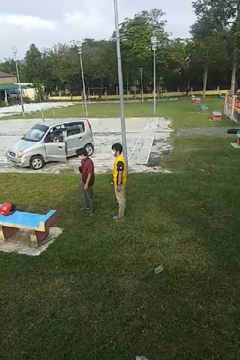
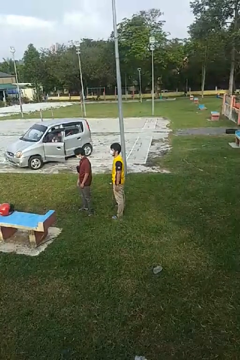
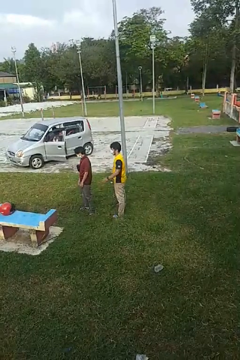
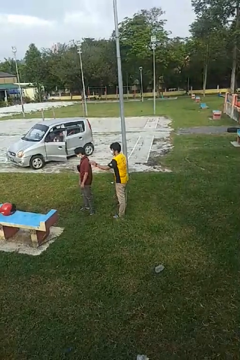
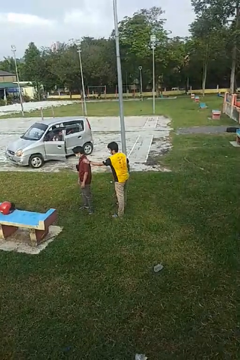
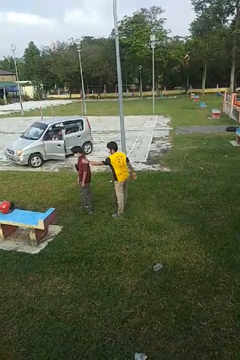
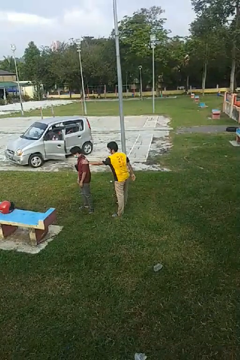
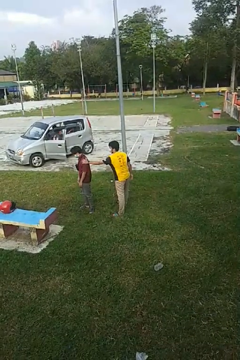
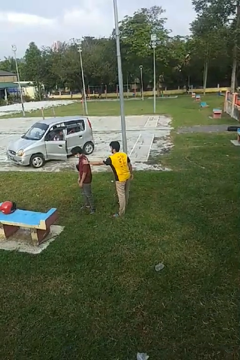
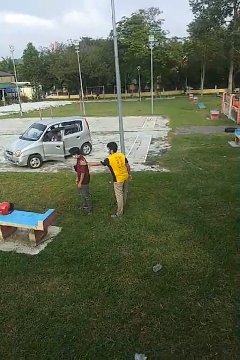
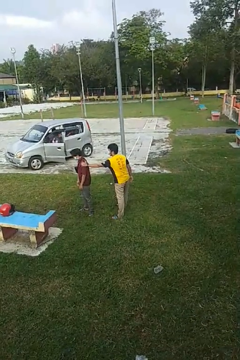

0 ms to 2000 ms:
person grabs person by shoulder

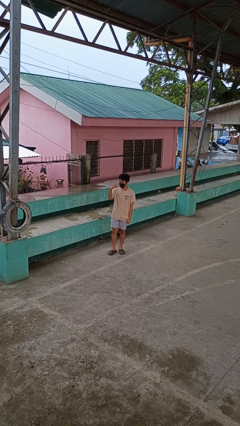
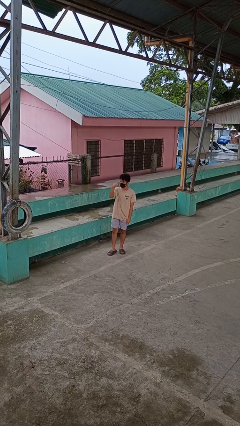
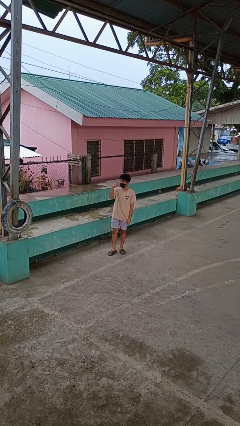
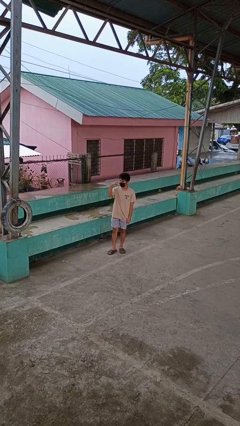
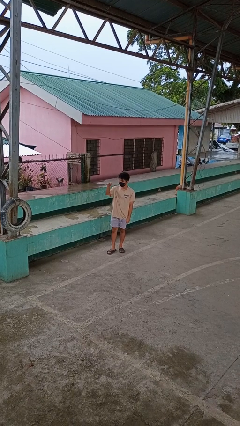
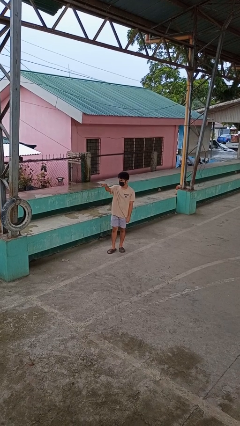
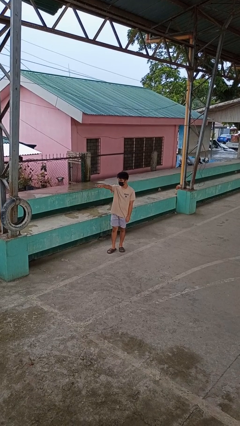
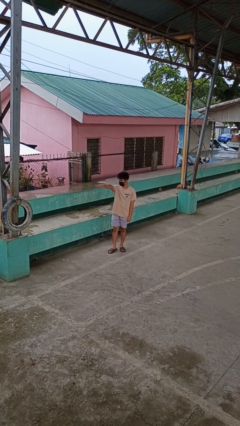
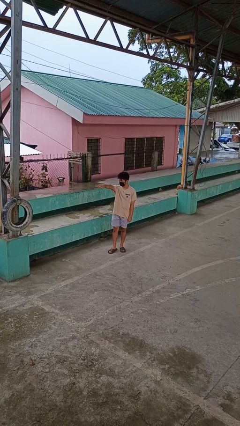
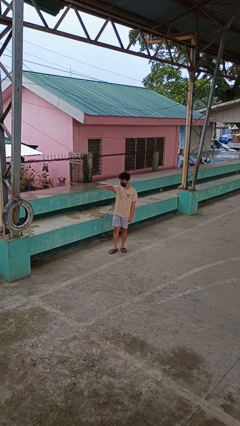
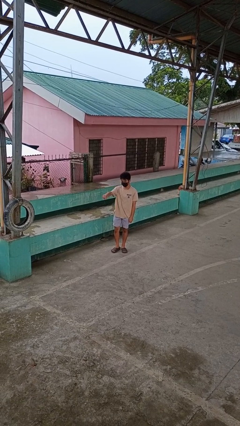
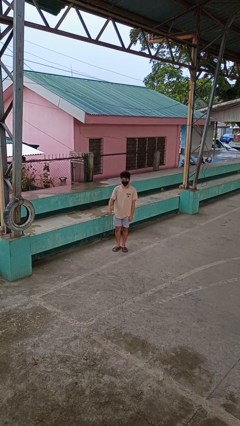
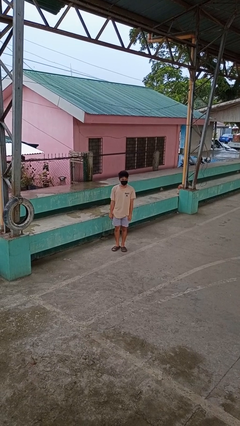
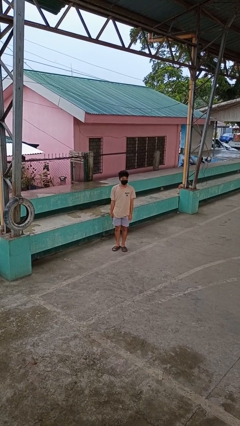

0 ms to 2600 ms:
person gestures watch closely

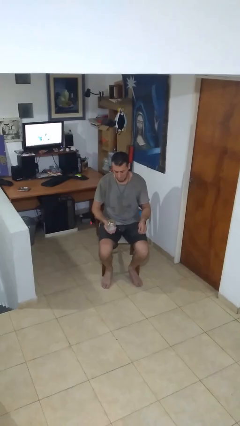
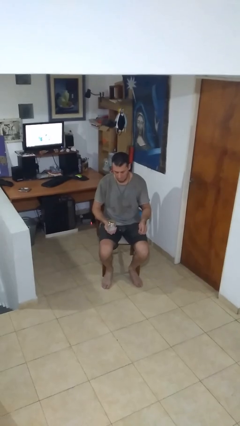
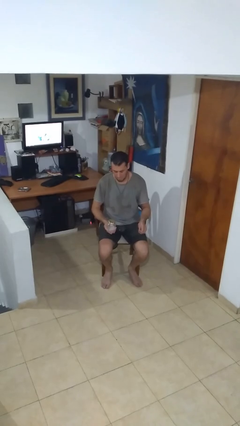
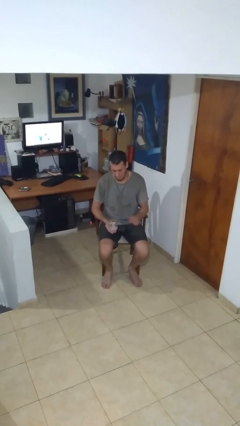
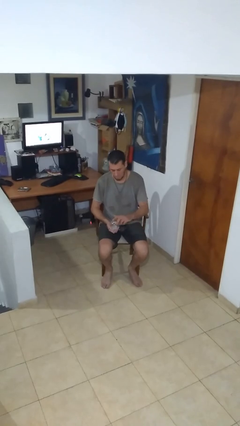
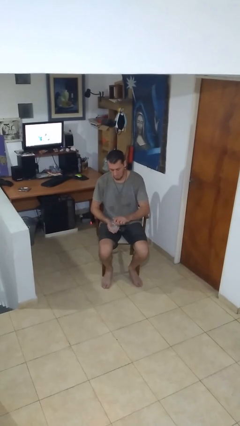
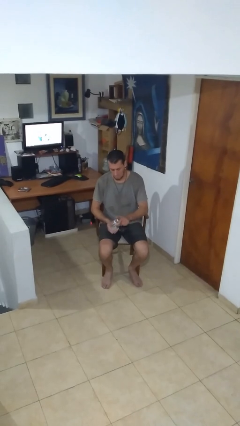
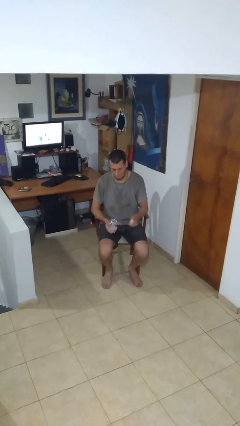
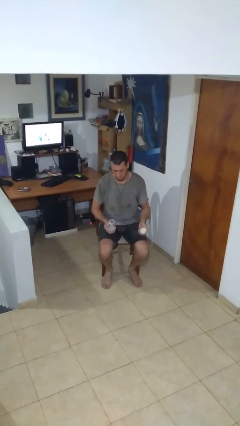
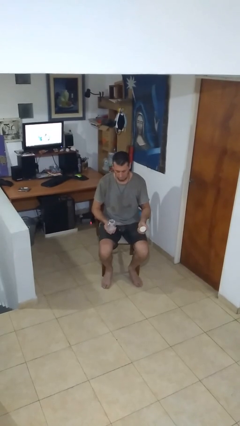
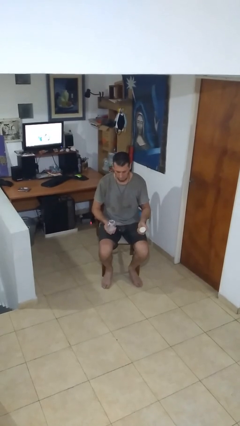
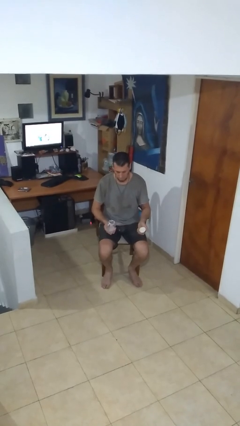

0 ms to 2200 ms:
person opens jar

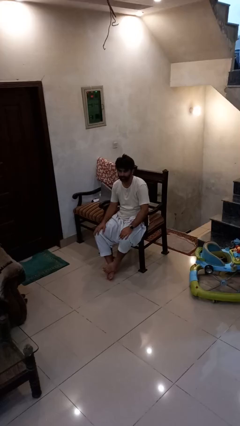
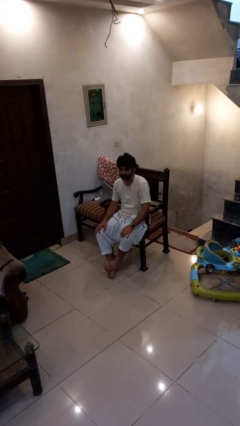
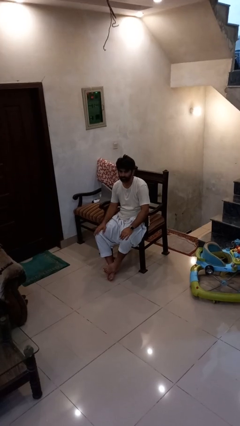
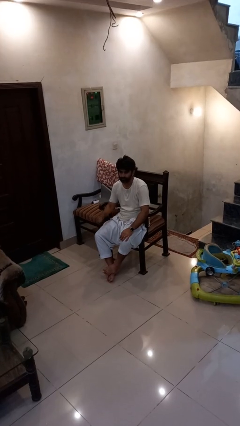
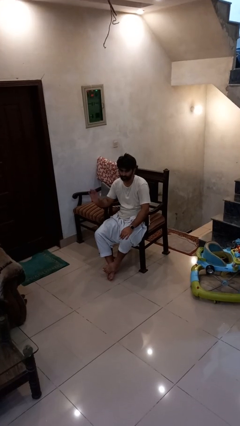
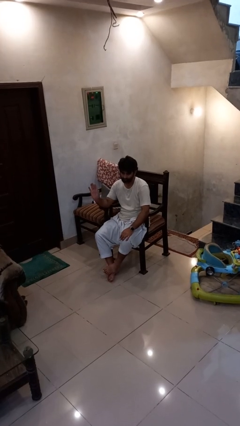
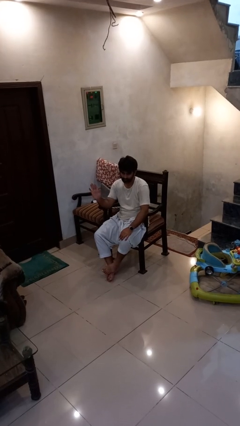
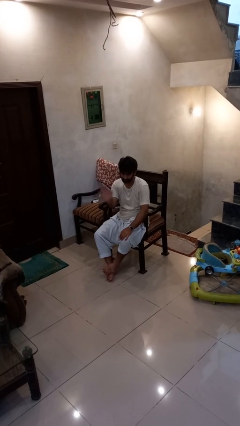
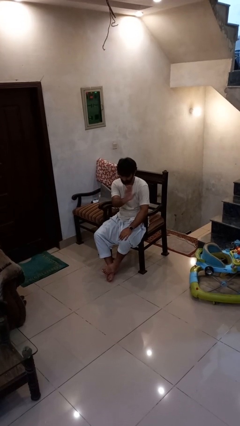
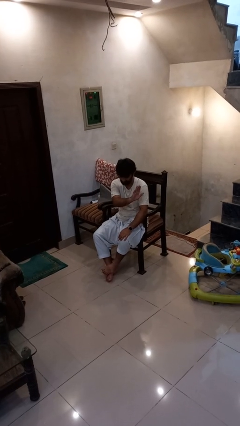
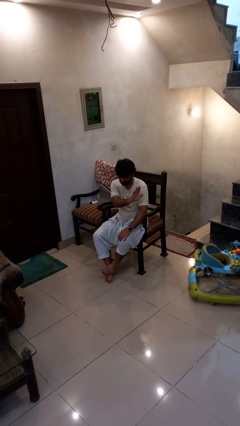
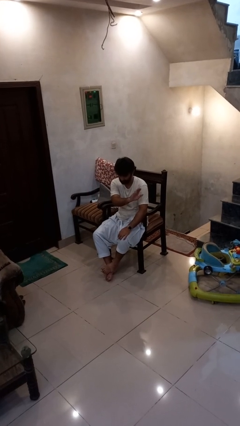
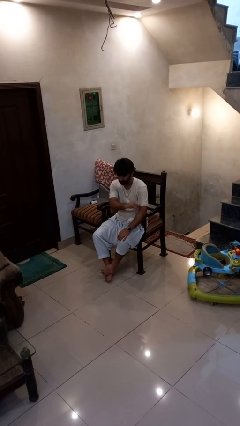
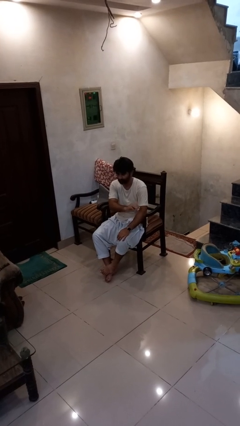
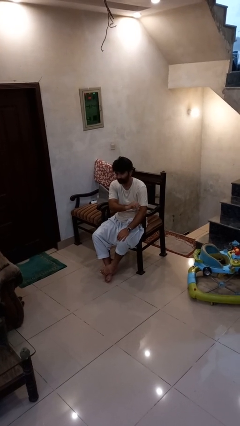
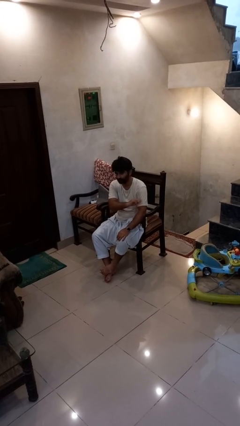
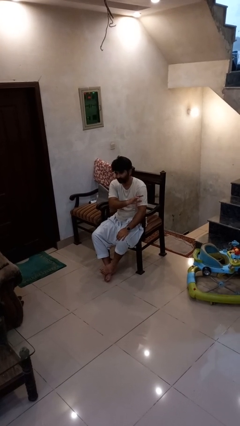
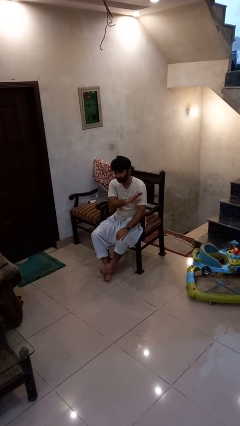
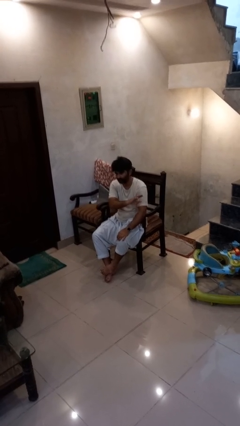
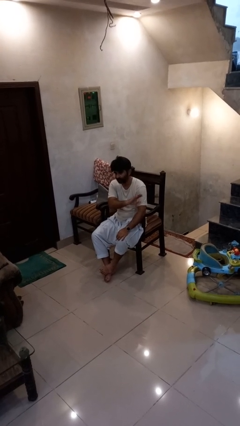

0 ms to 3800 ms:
person gestures swipe left

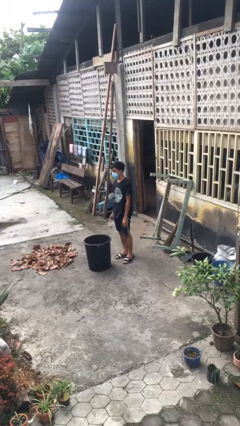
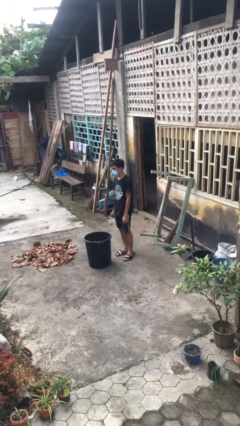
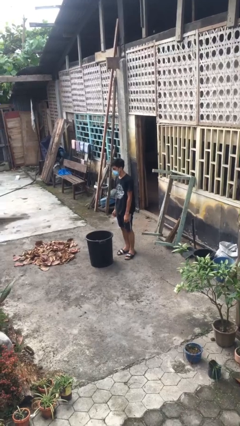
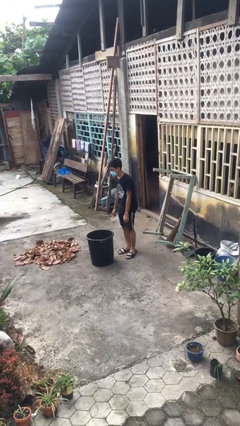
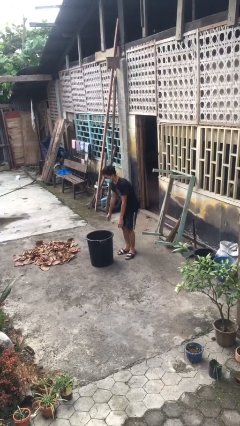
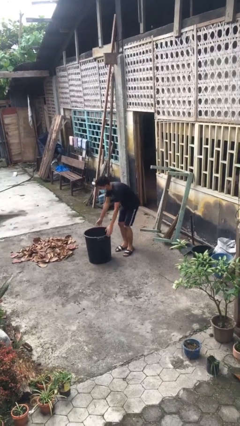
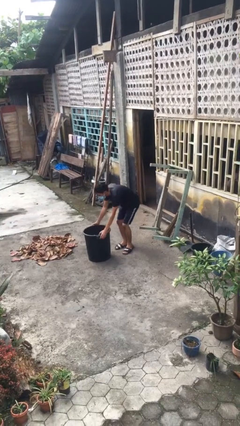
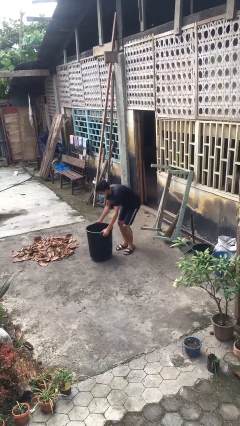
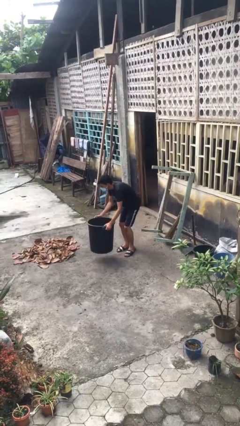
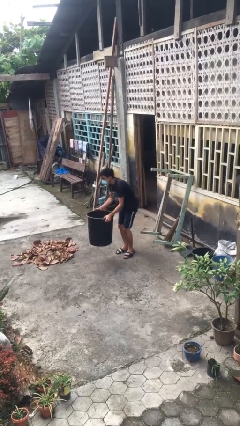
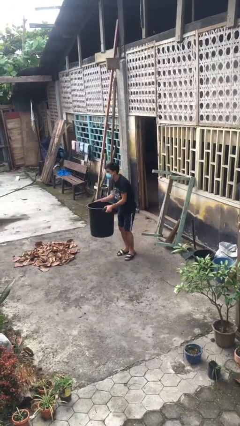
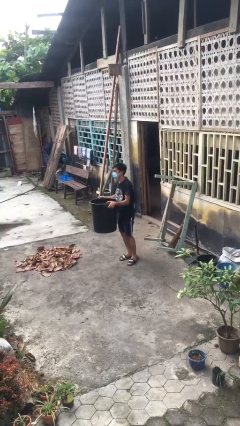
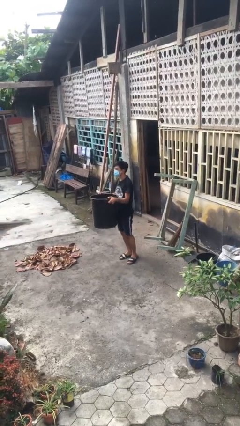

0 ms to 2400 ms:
person picks up object from floor

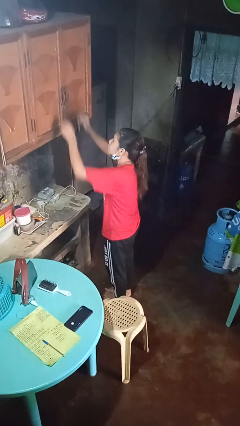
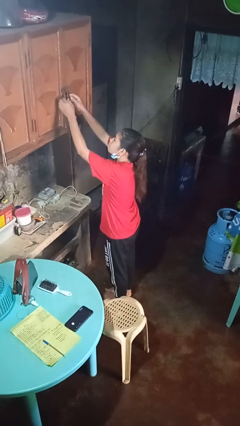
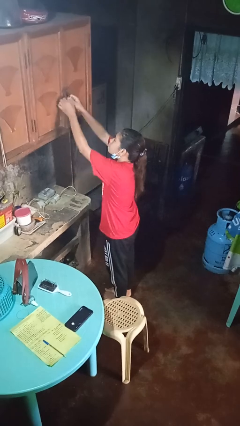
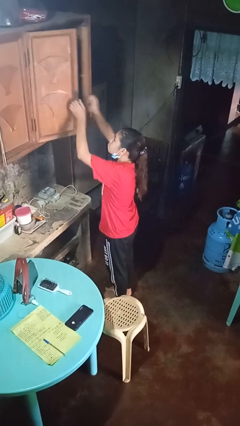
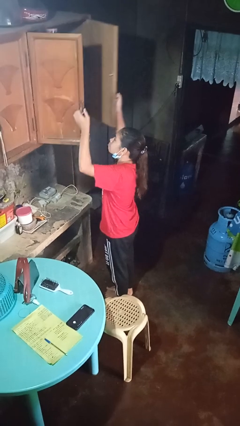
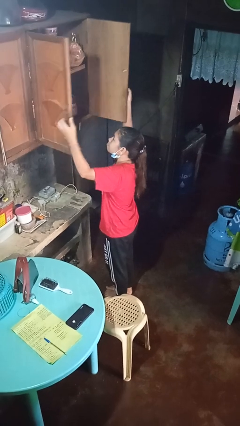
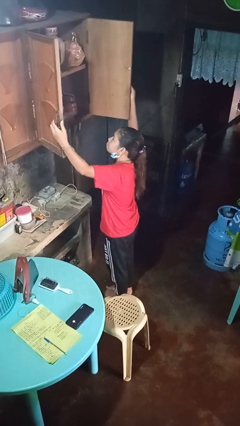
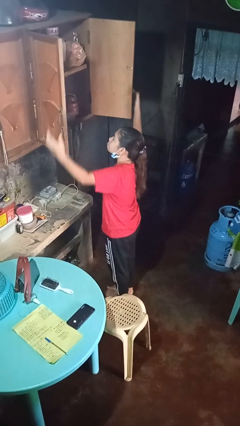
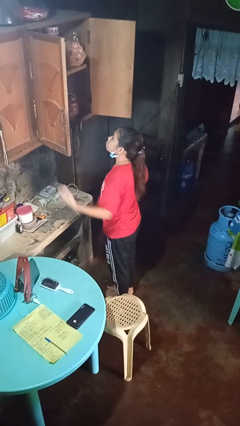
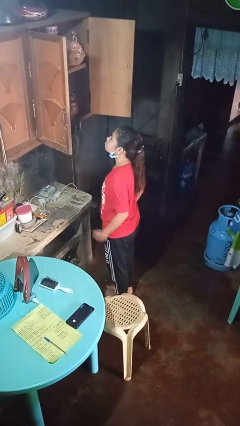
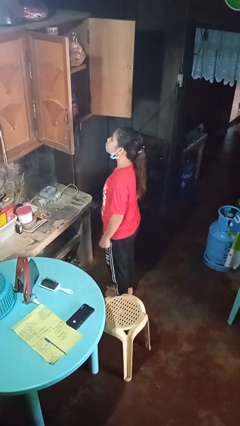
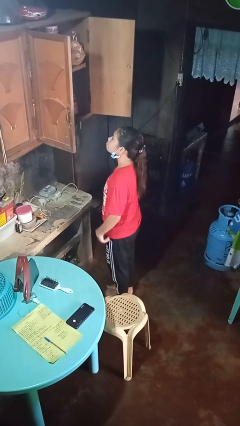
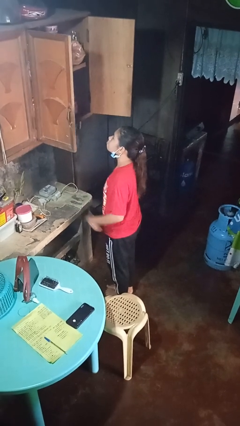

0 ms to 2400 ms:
person opens cabinet

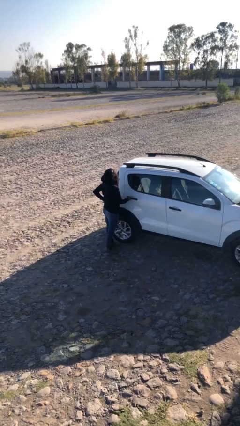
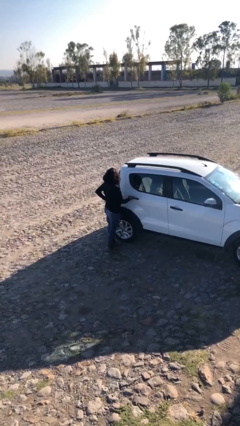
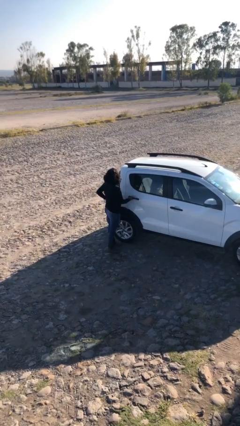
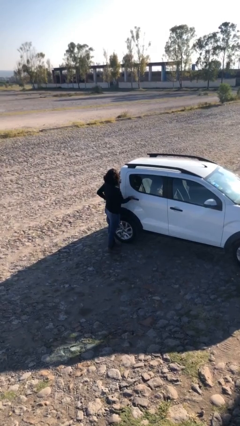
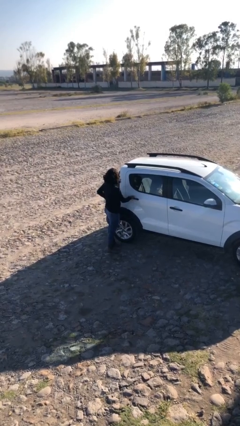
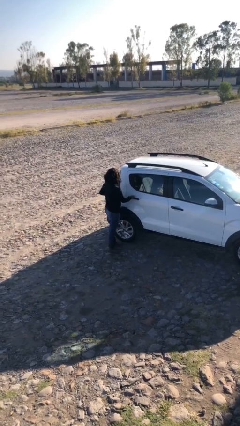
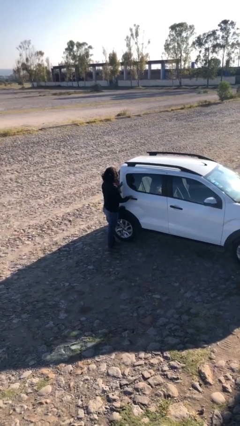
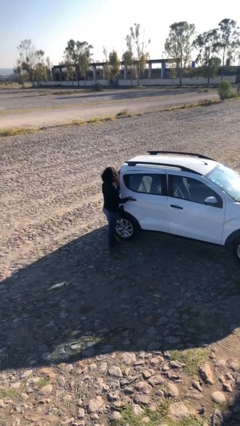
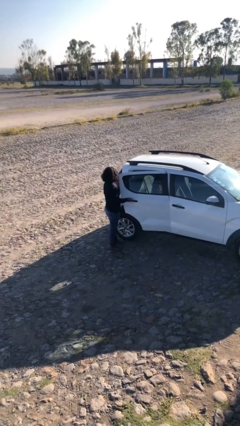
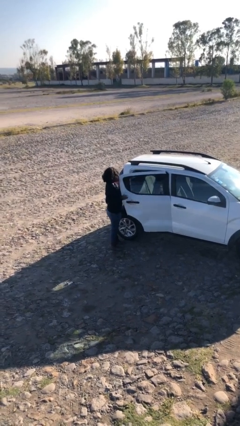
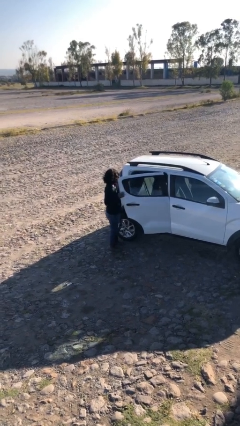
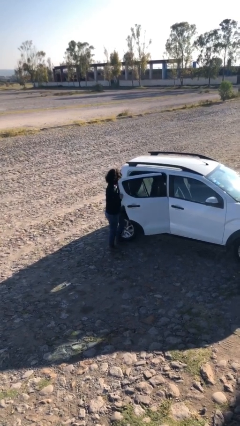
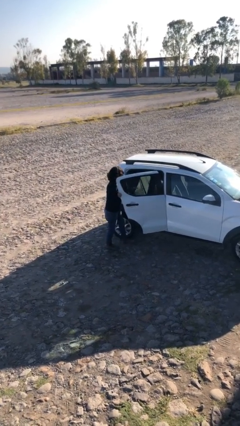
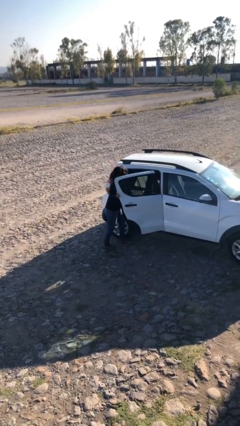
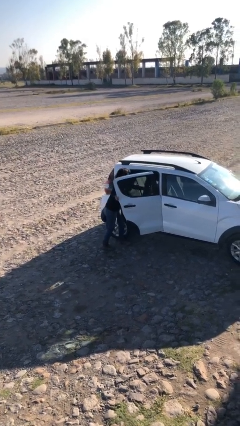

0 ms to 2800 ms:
person opens car door
